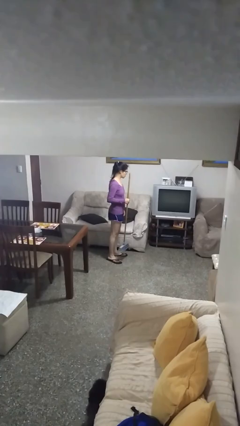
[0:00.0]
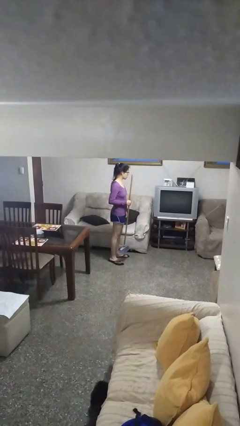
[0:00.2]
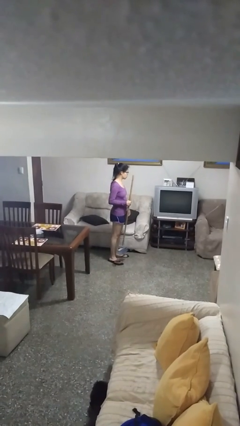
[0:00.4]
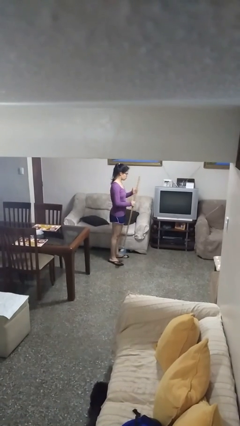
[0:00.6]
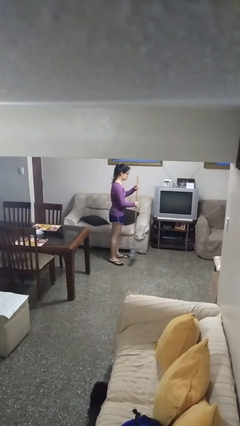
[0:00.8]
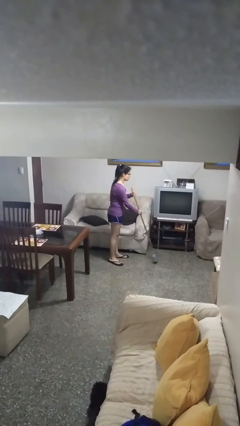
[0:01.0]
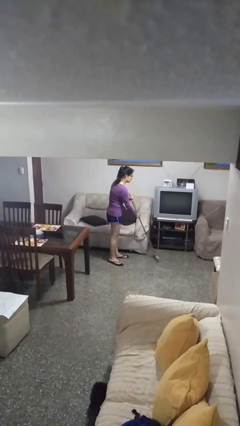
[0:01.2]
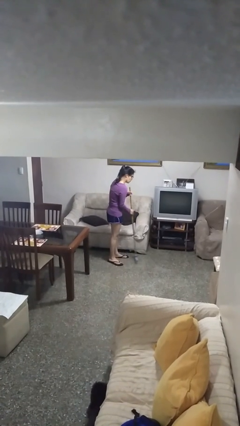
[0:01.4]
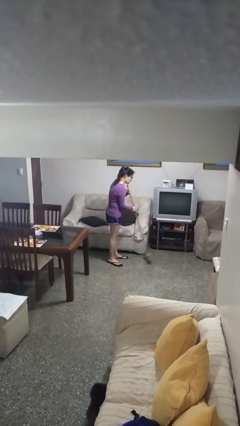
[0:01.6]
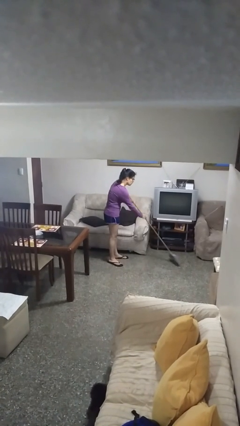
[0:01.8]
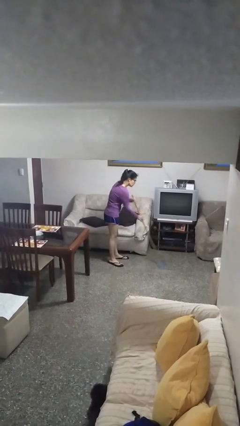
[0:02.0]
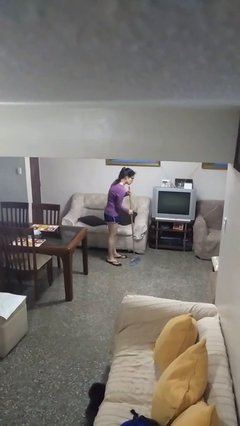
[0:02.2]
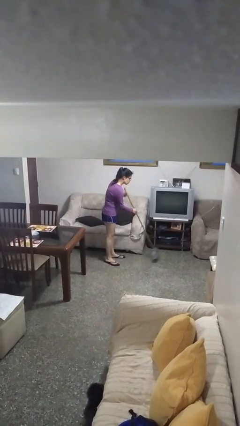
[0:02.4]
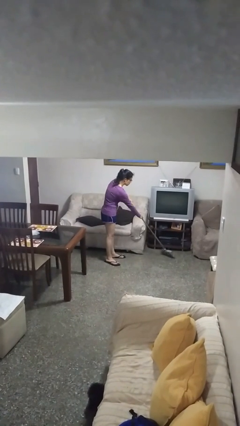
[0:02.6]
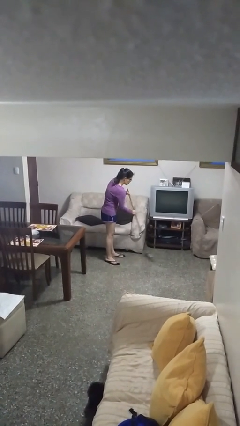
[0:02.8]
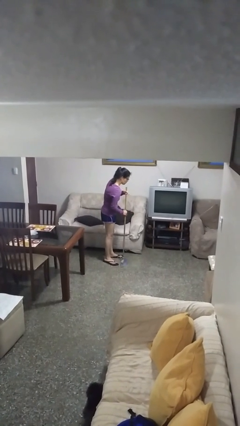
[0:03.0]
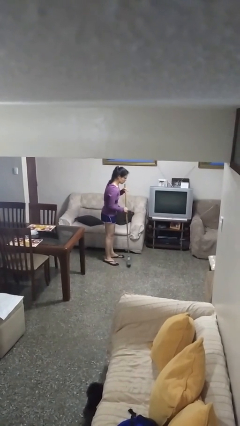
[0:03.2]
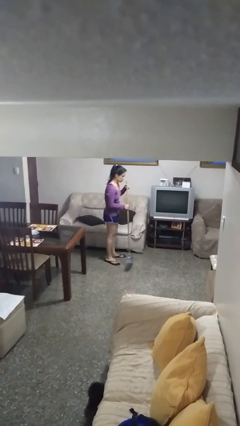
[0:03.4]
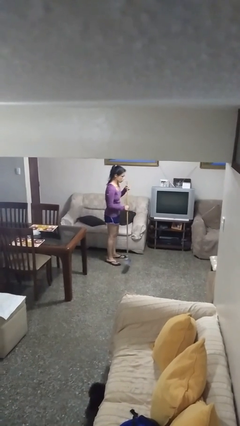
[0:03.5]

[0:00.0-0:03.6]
person sweeps floor

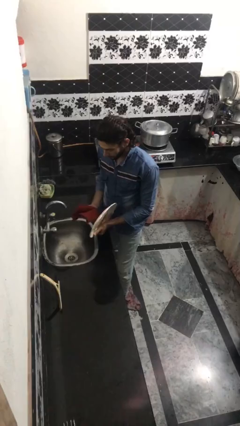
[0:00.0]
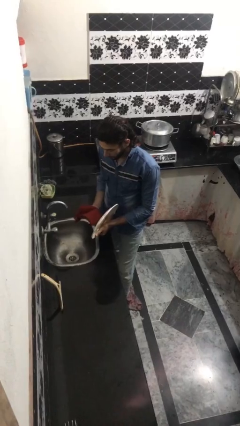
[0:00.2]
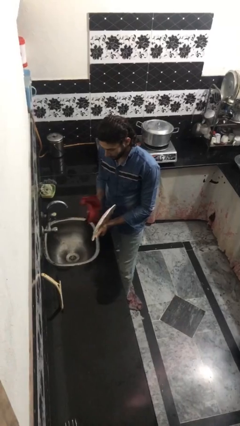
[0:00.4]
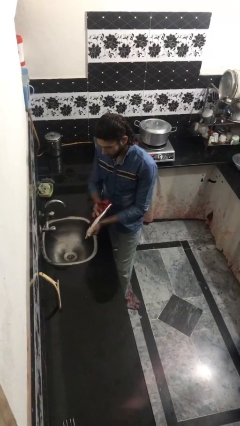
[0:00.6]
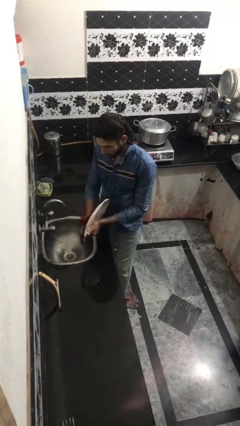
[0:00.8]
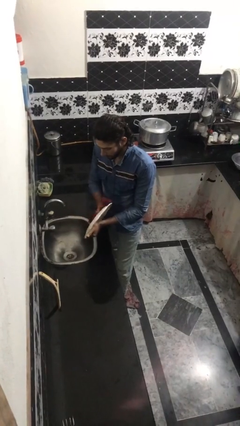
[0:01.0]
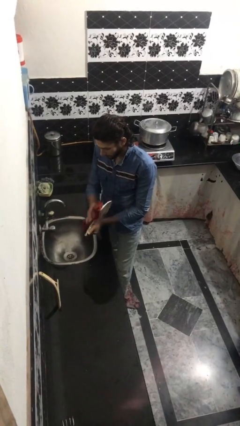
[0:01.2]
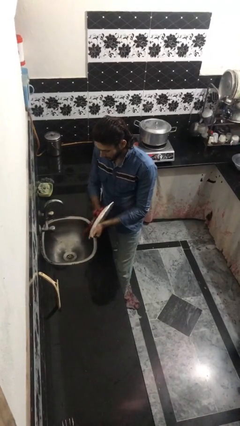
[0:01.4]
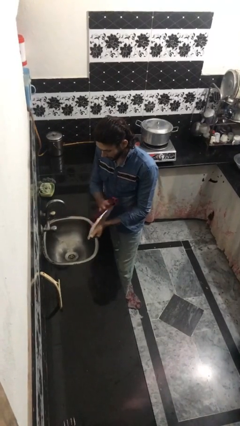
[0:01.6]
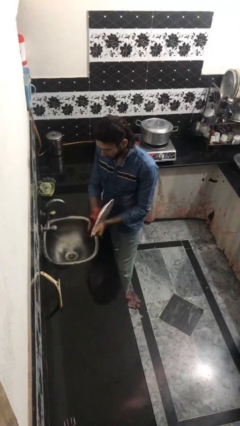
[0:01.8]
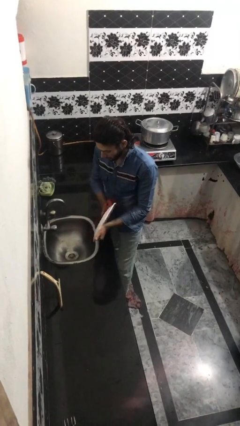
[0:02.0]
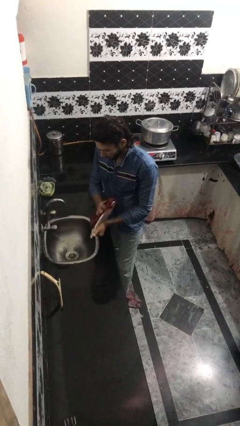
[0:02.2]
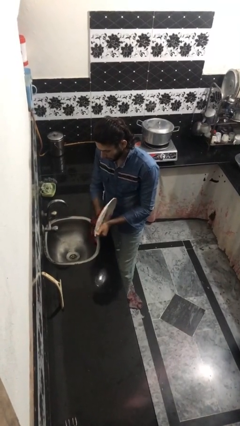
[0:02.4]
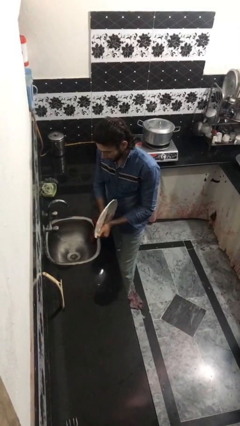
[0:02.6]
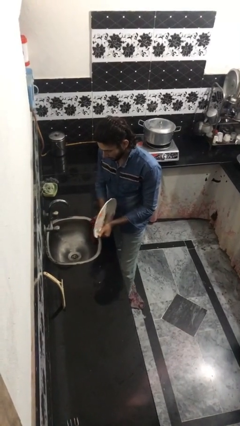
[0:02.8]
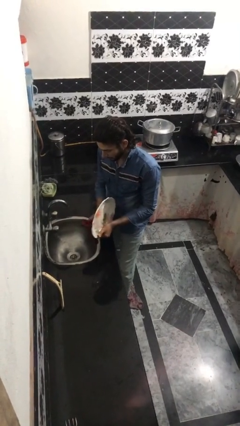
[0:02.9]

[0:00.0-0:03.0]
person dries dish

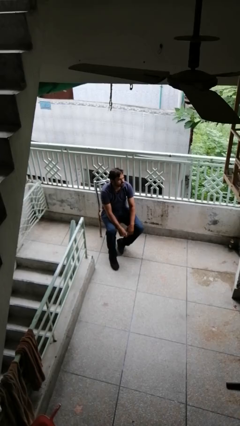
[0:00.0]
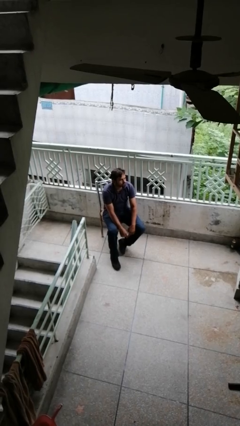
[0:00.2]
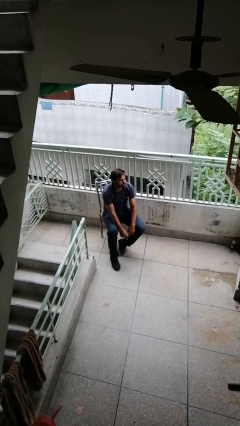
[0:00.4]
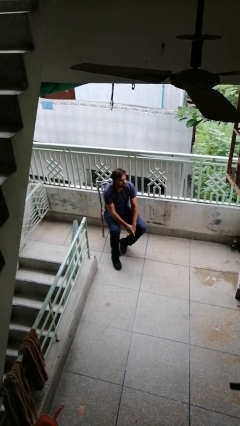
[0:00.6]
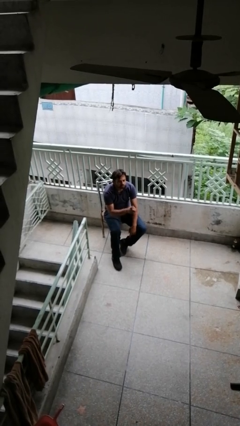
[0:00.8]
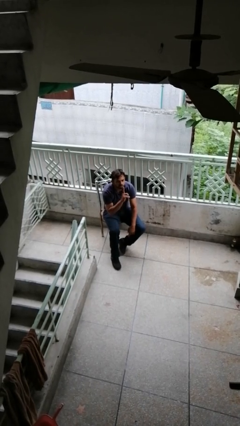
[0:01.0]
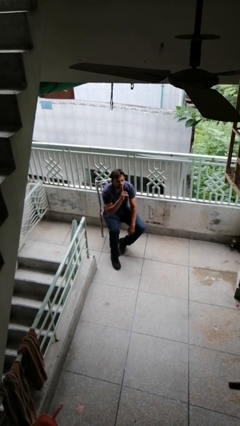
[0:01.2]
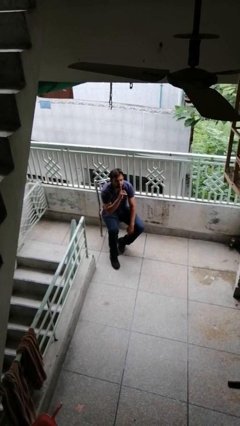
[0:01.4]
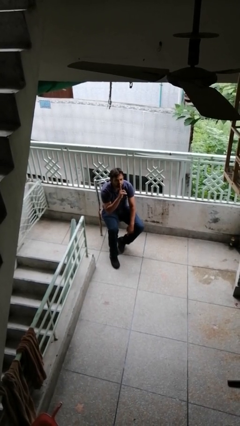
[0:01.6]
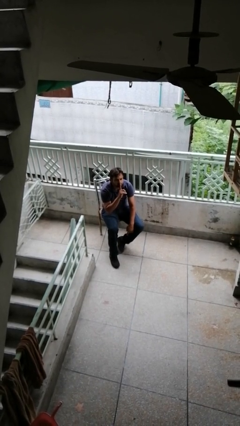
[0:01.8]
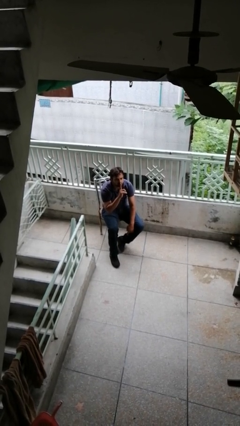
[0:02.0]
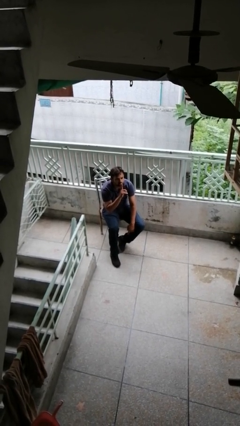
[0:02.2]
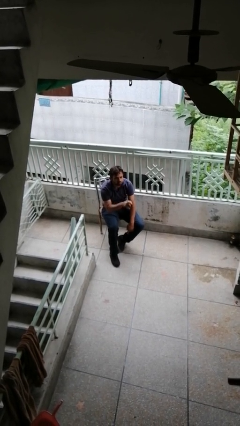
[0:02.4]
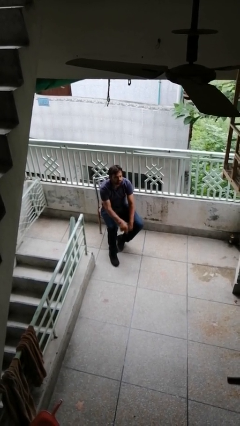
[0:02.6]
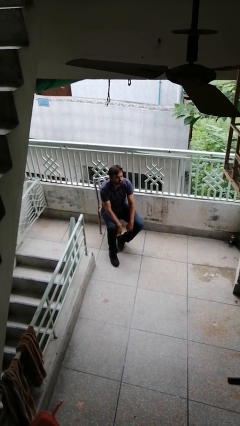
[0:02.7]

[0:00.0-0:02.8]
person gestures be quiet

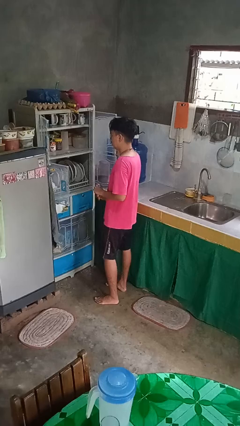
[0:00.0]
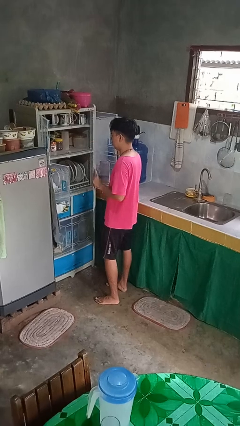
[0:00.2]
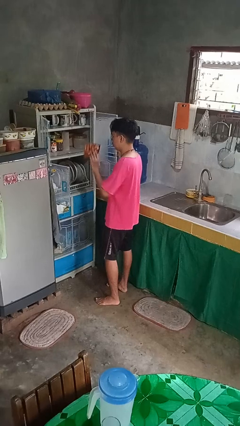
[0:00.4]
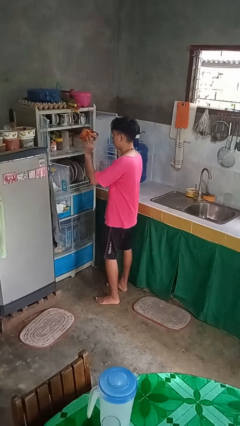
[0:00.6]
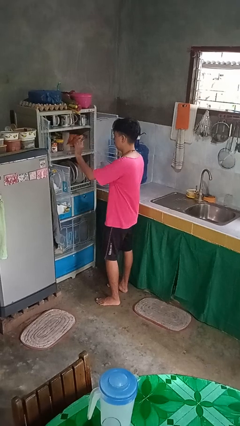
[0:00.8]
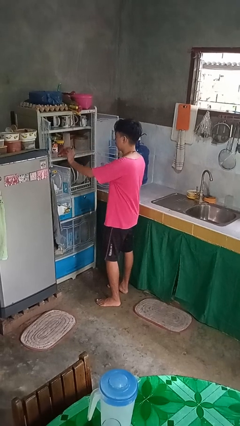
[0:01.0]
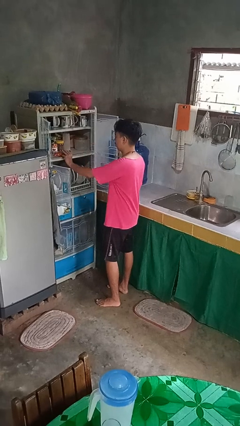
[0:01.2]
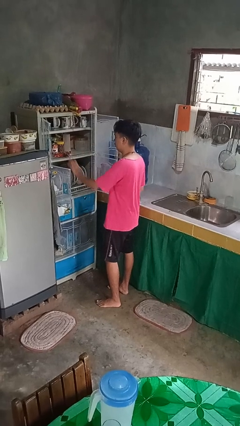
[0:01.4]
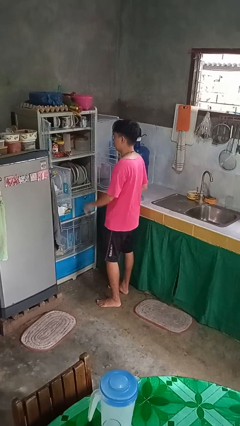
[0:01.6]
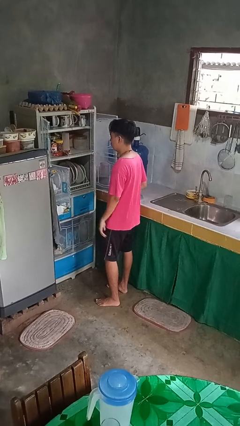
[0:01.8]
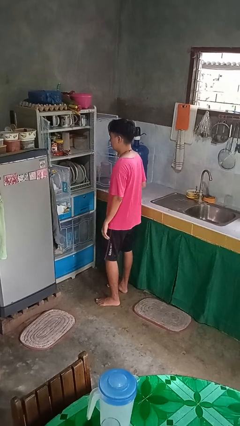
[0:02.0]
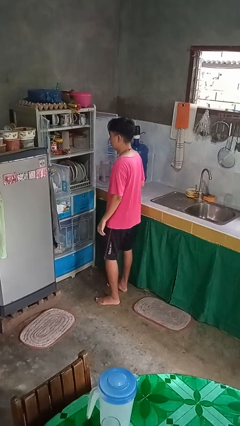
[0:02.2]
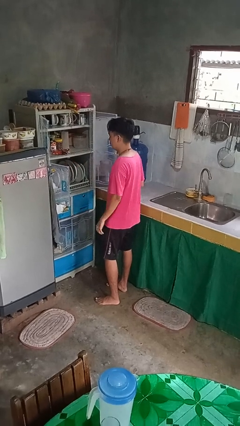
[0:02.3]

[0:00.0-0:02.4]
person puts object in cabinet

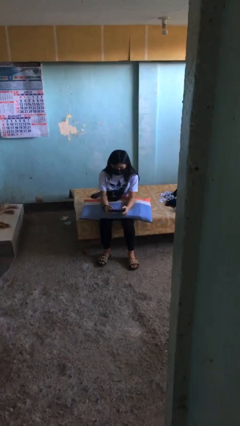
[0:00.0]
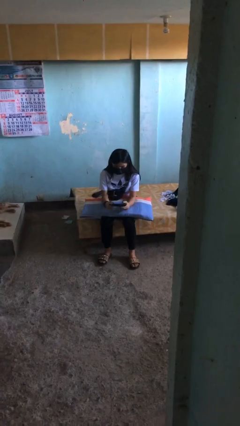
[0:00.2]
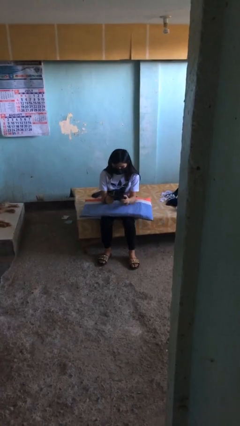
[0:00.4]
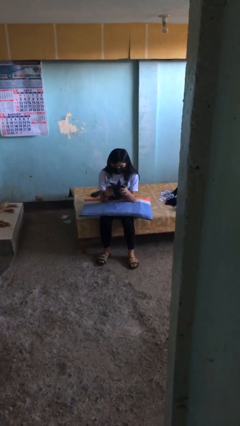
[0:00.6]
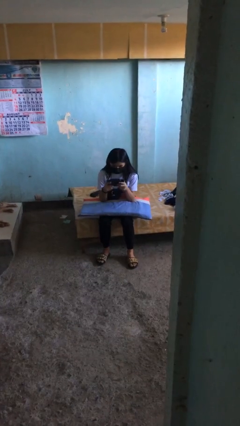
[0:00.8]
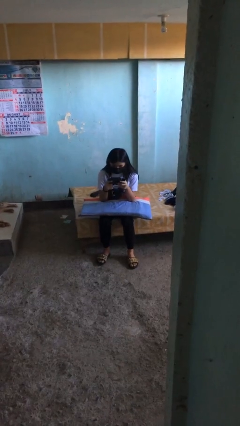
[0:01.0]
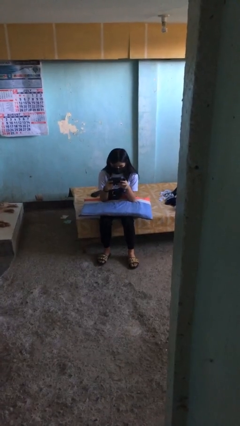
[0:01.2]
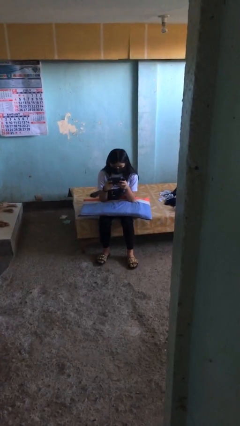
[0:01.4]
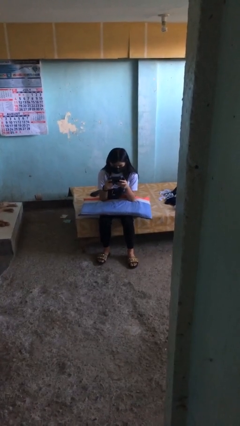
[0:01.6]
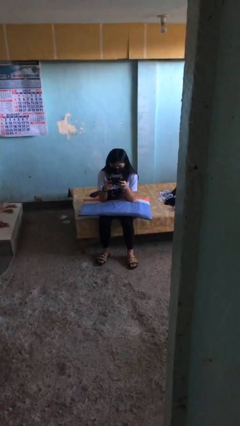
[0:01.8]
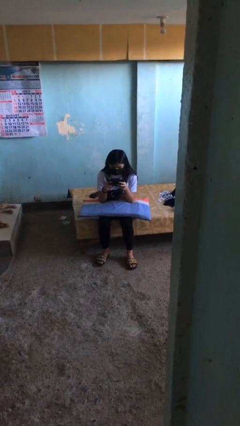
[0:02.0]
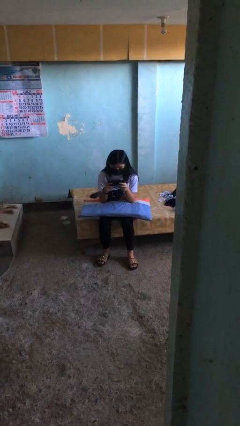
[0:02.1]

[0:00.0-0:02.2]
person interacts with handheld game

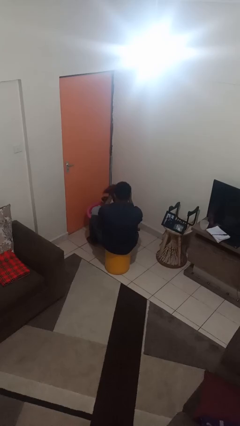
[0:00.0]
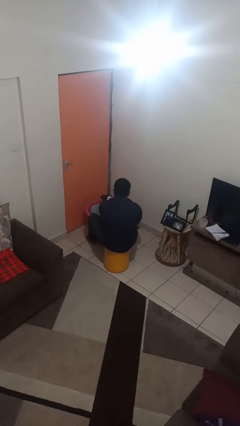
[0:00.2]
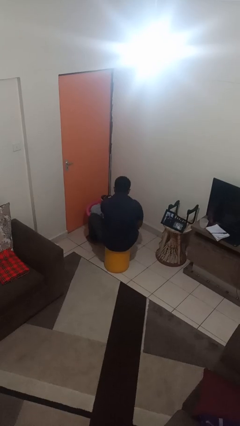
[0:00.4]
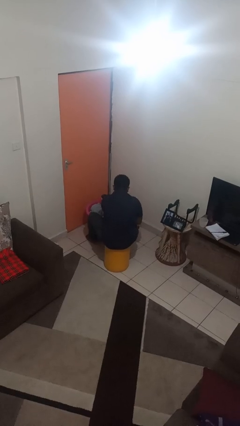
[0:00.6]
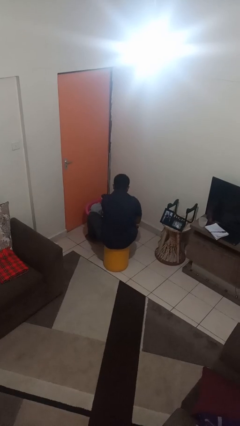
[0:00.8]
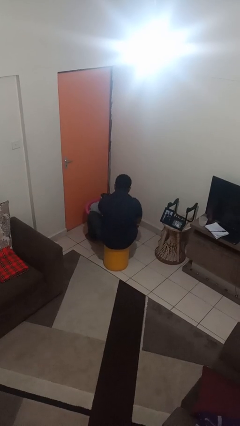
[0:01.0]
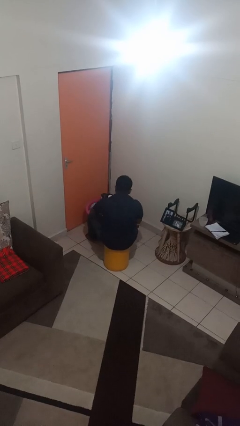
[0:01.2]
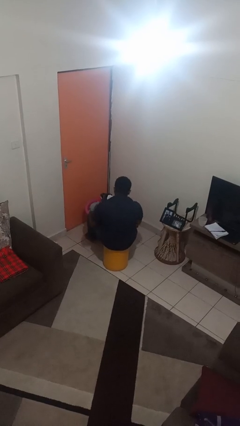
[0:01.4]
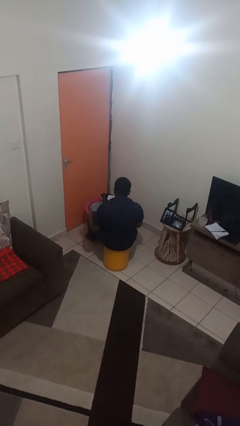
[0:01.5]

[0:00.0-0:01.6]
person puts object into basket

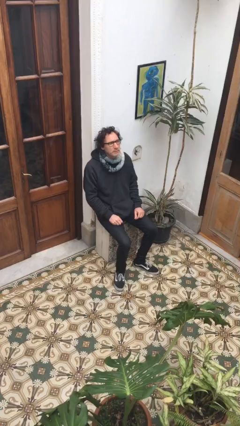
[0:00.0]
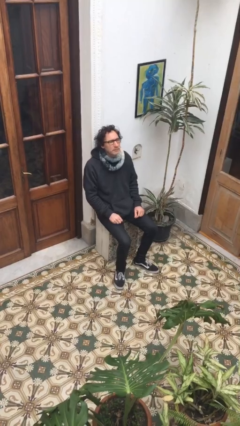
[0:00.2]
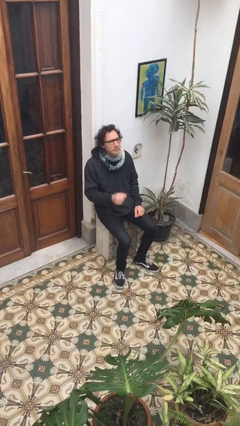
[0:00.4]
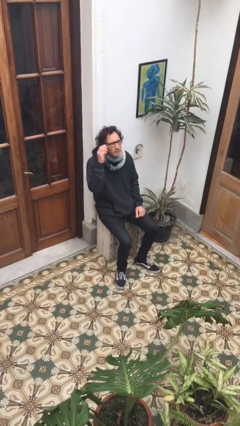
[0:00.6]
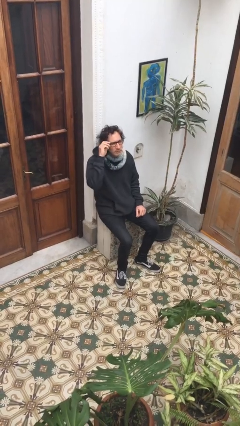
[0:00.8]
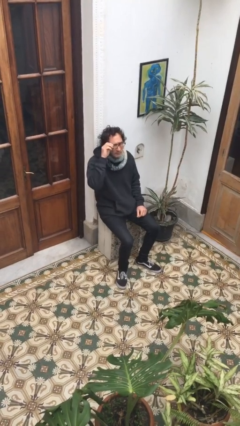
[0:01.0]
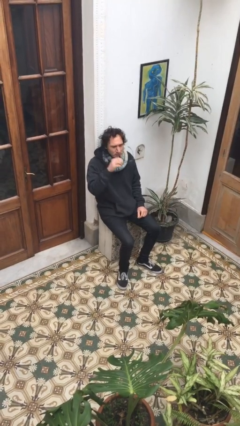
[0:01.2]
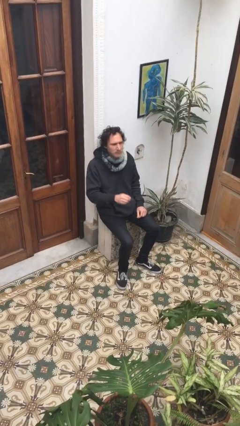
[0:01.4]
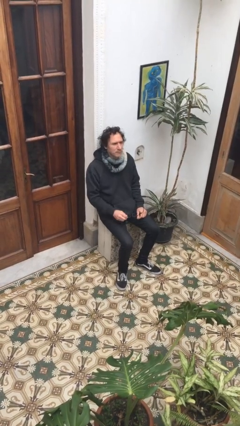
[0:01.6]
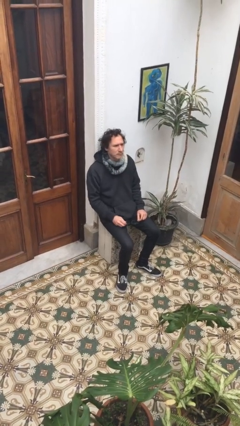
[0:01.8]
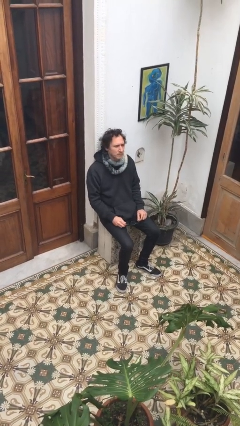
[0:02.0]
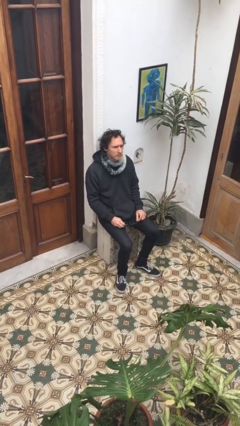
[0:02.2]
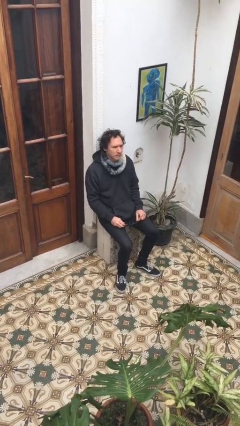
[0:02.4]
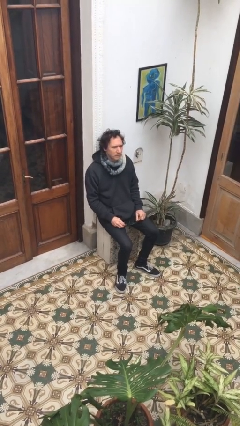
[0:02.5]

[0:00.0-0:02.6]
person takes off glasses
